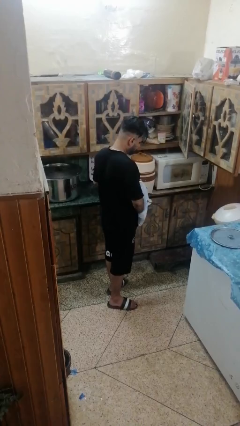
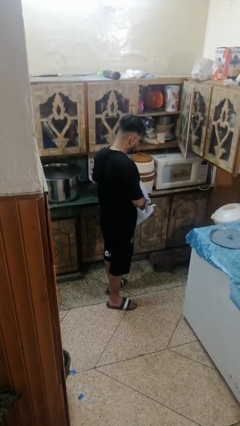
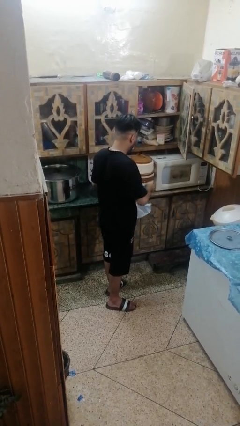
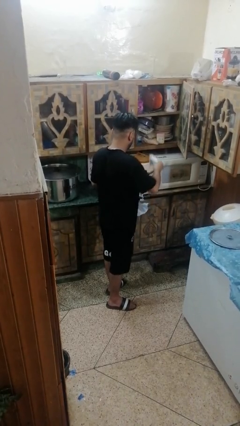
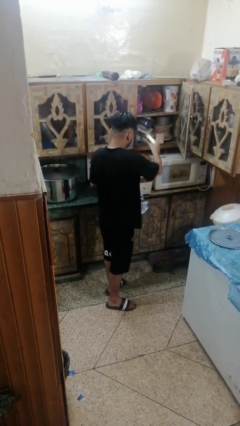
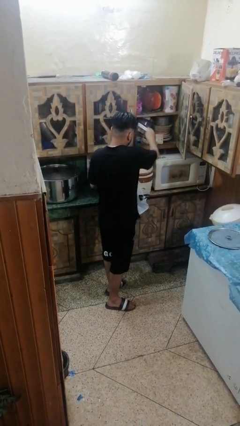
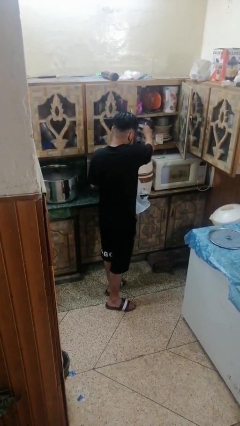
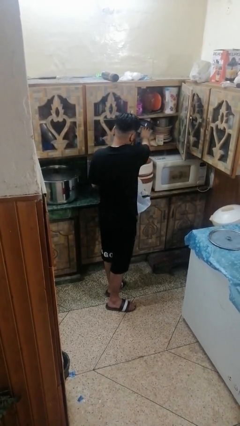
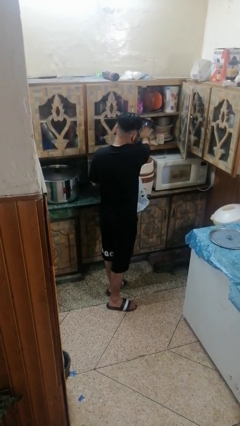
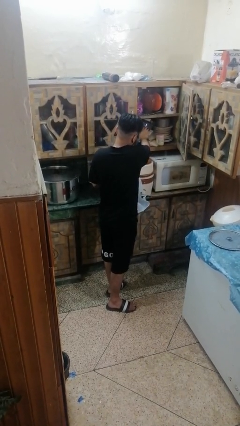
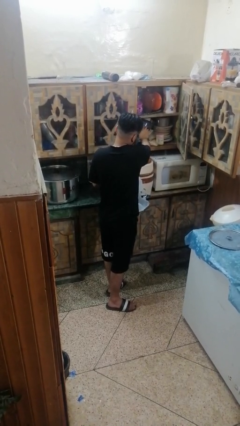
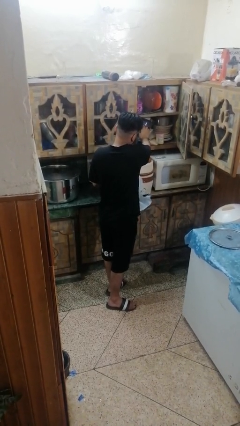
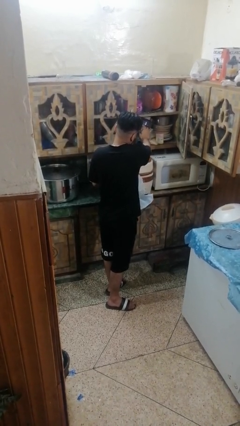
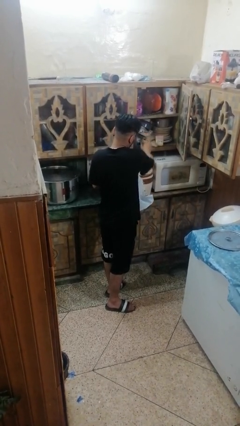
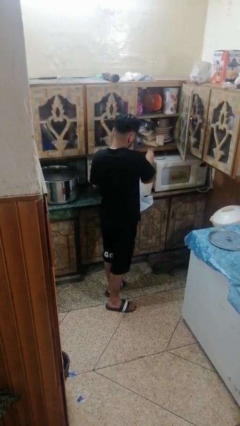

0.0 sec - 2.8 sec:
person loads groceries into cabinet

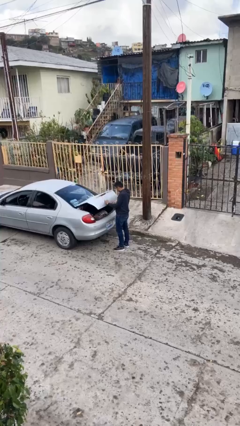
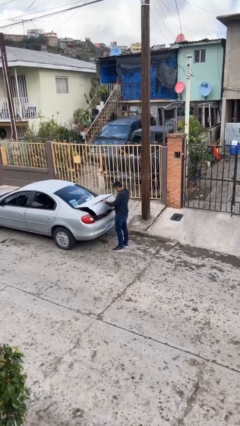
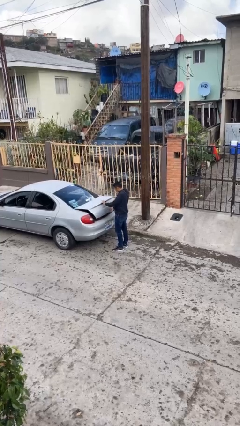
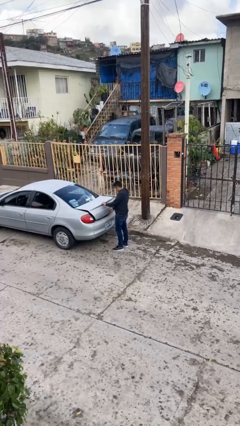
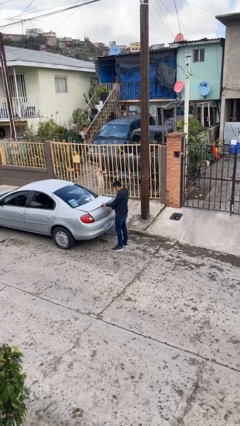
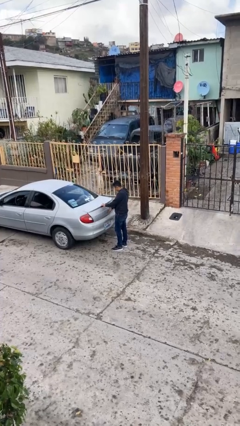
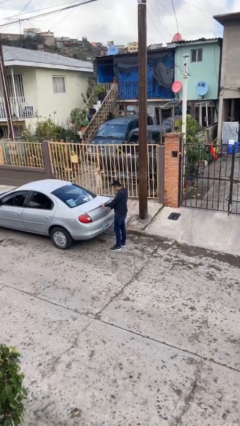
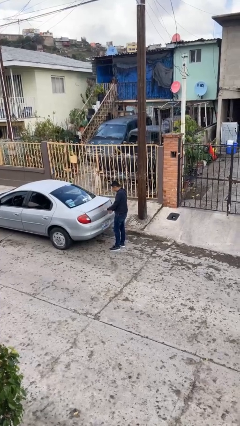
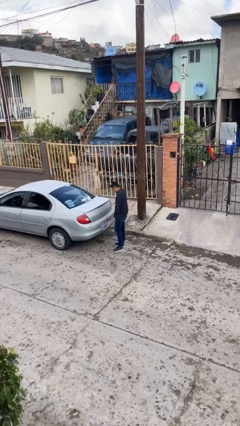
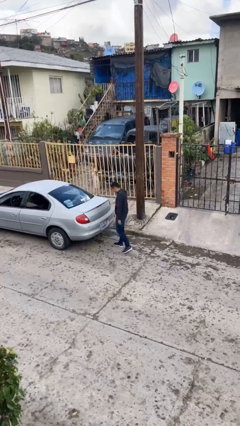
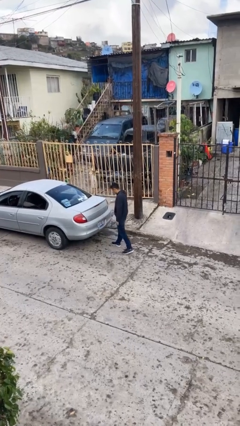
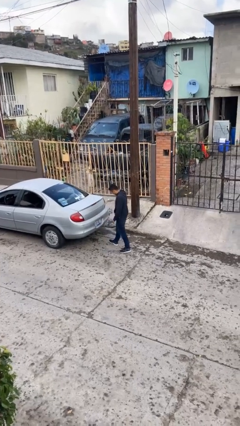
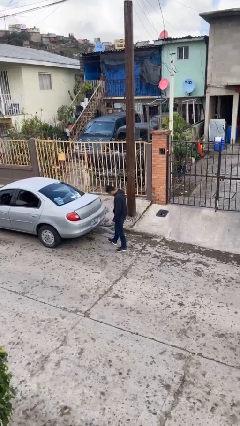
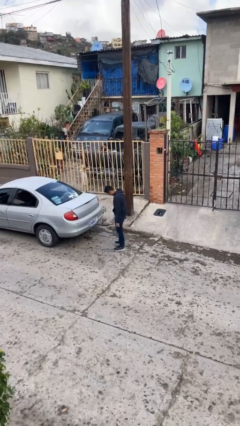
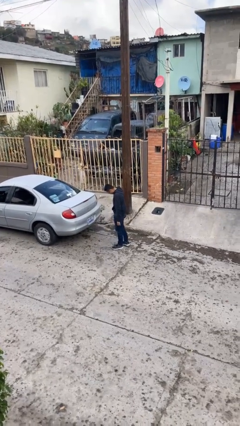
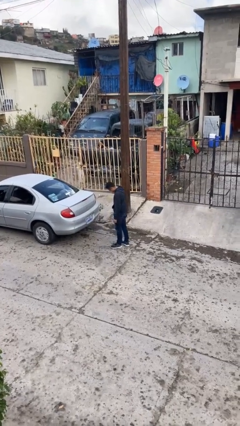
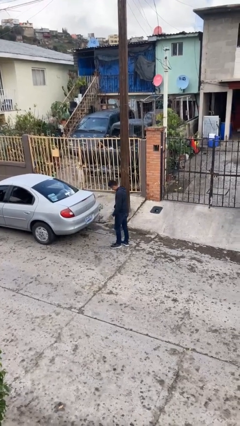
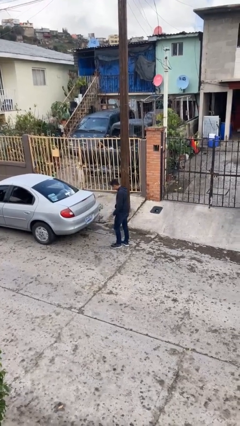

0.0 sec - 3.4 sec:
person closes car trunk

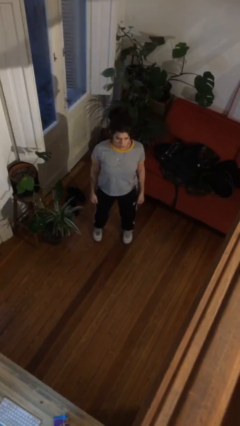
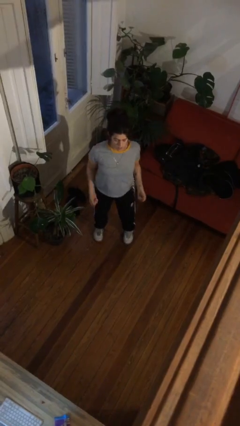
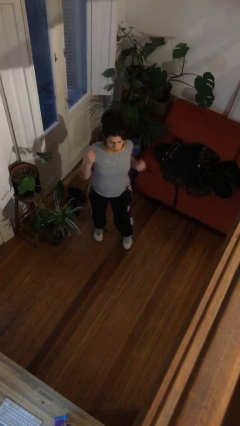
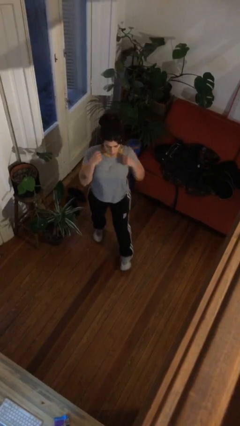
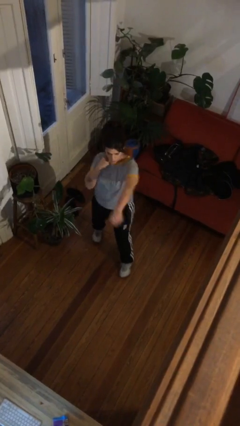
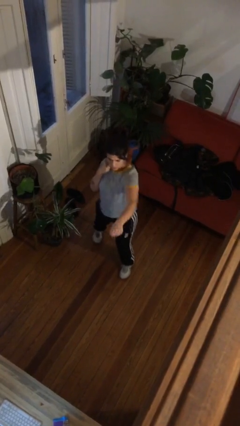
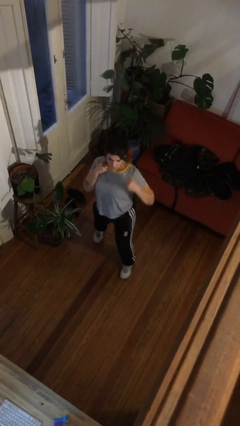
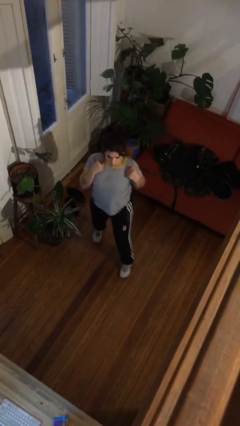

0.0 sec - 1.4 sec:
person punches

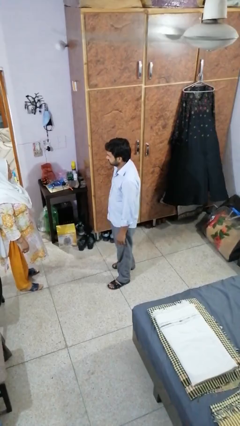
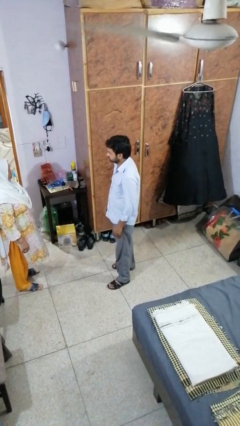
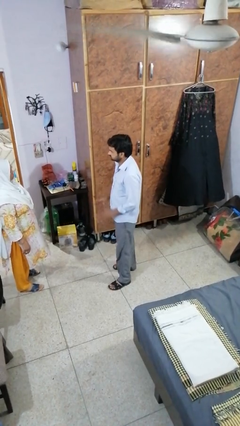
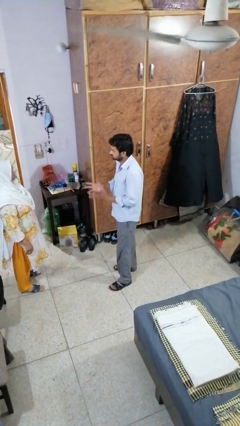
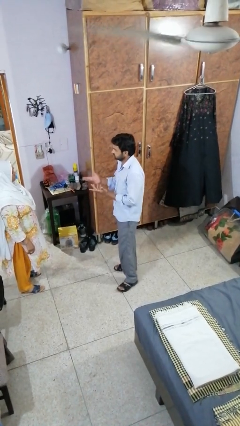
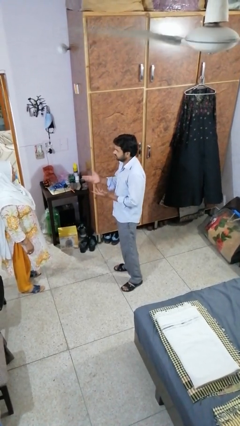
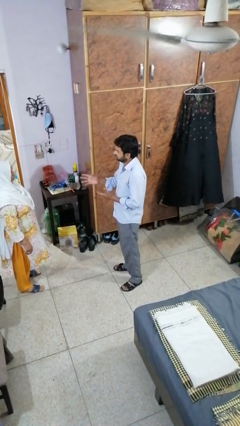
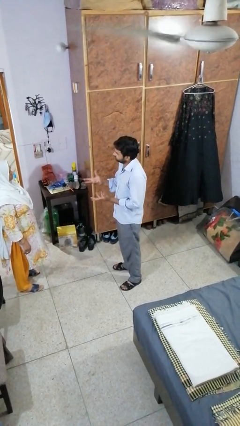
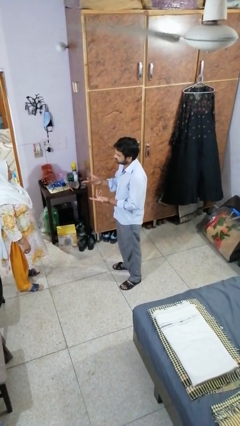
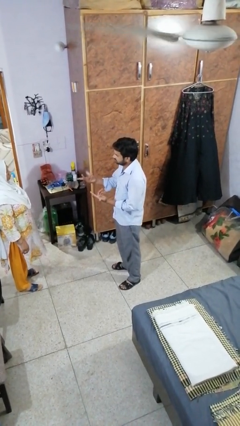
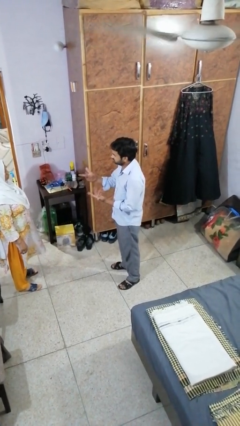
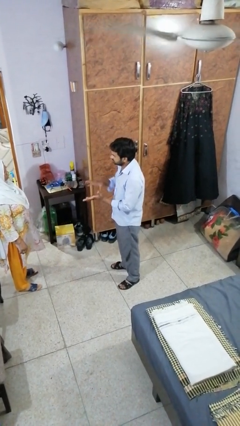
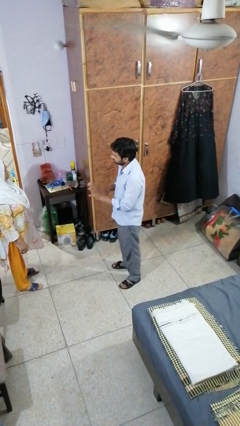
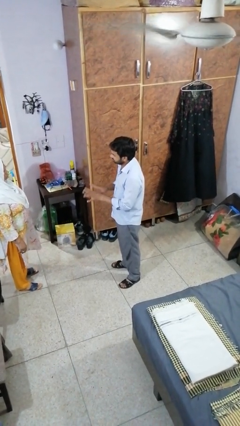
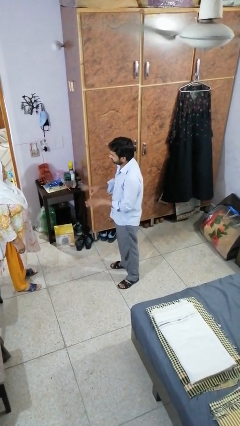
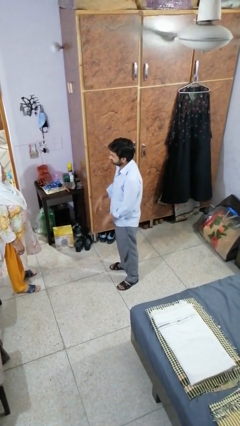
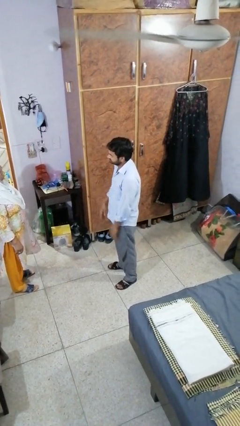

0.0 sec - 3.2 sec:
person talks to person

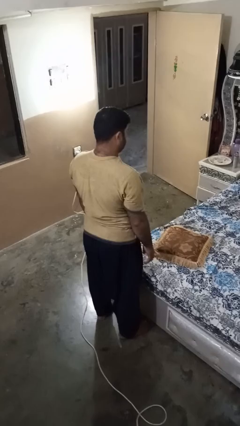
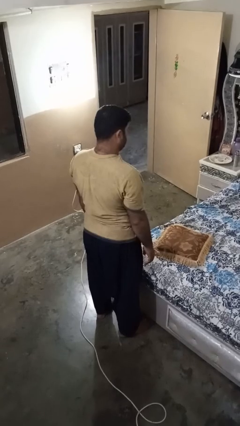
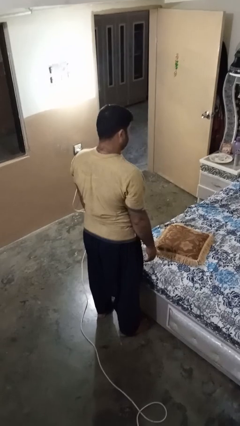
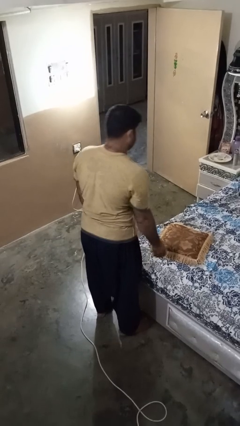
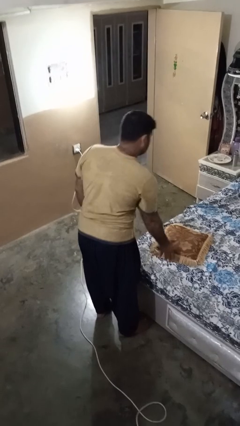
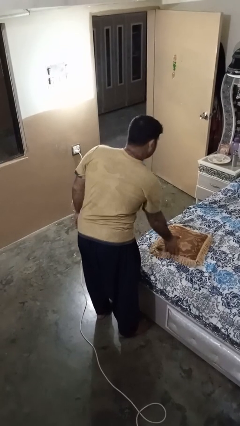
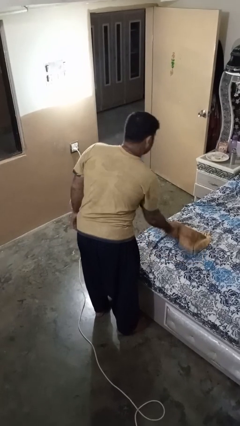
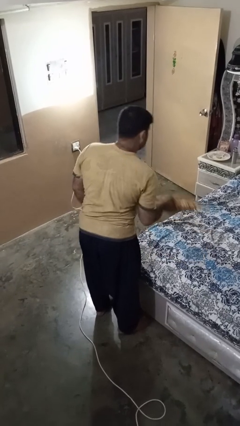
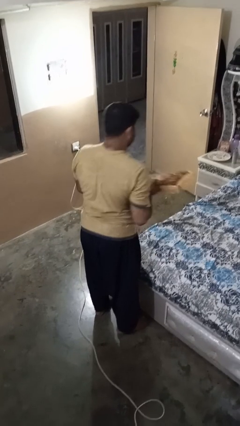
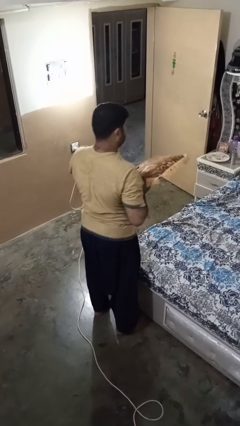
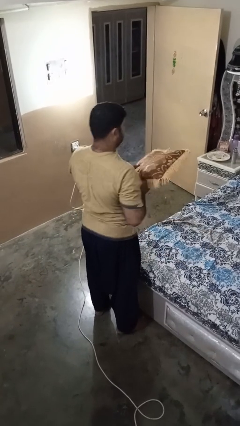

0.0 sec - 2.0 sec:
person picks up object from bed

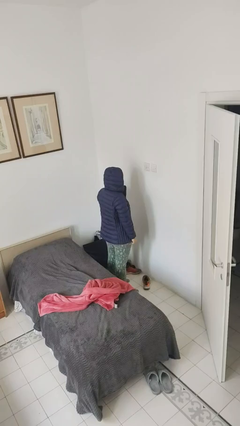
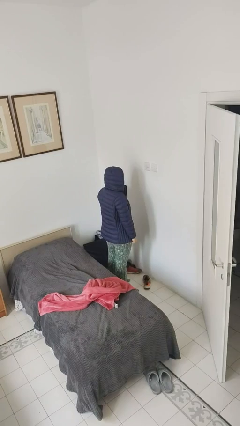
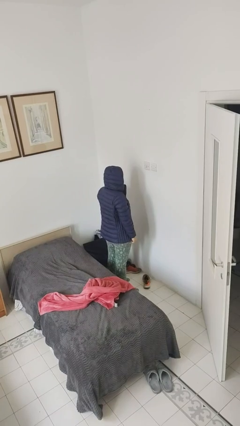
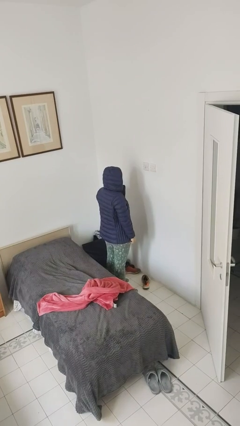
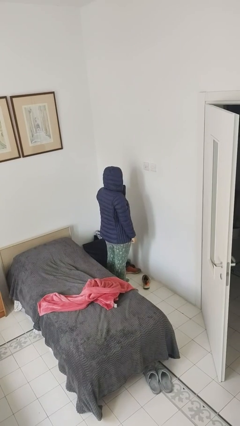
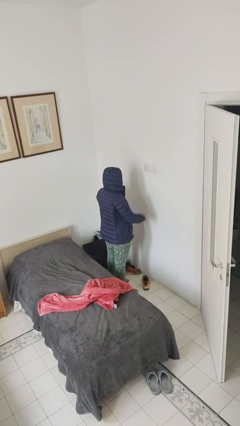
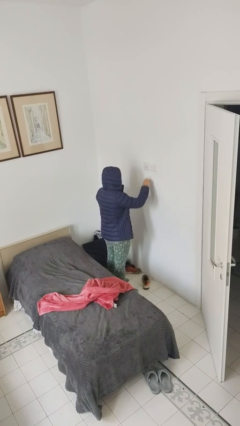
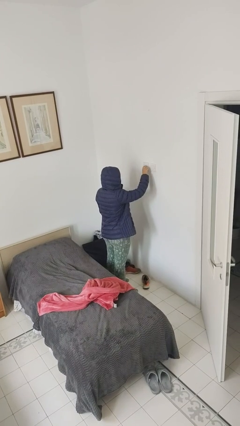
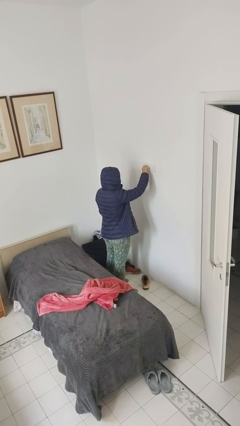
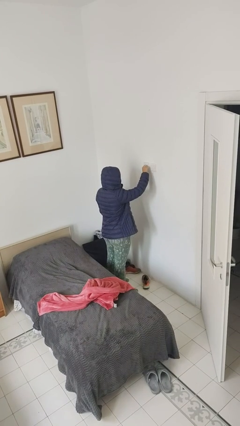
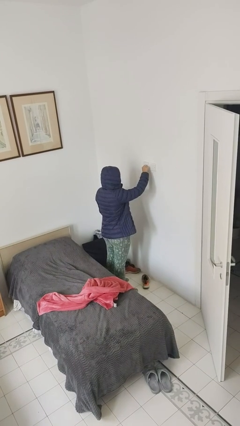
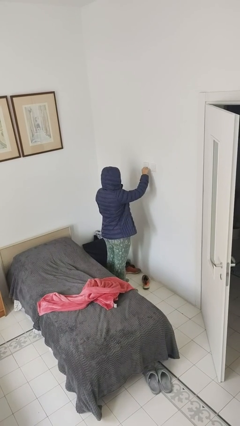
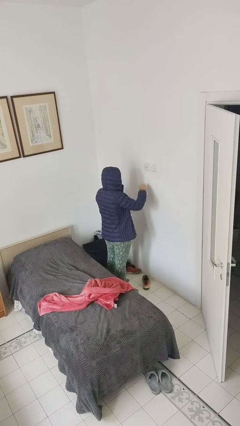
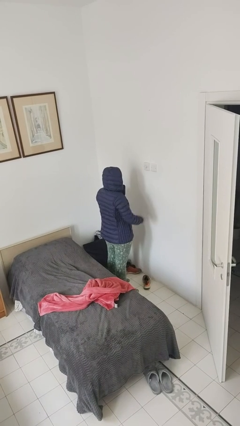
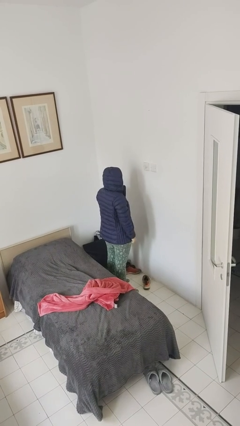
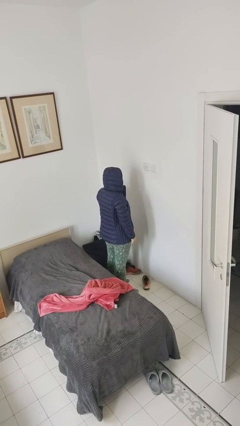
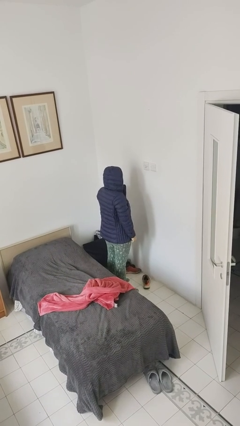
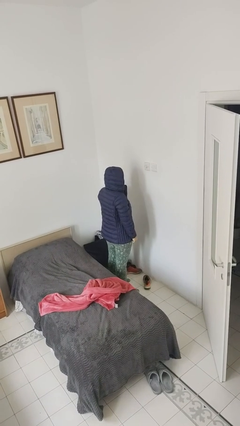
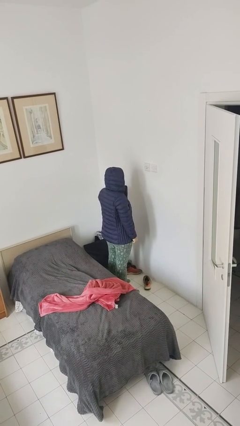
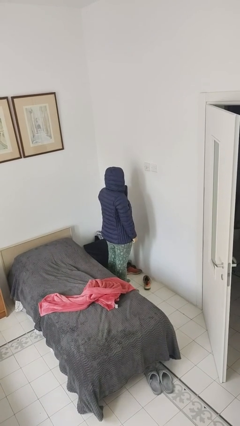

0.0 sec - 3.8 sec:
person turns on fan

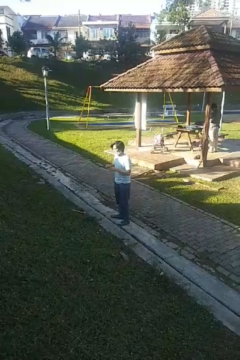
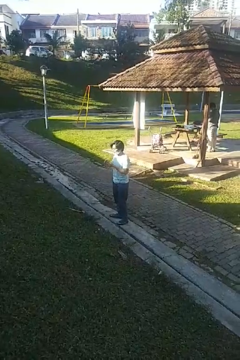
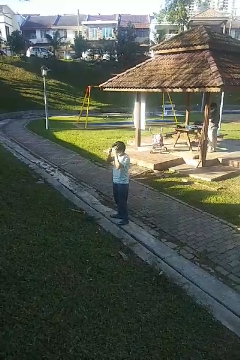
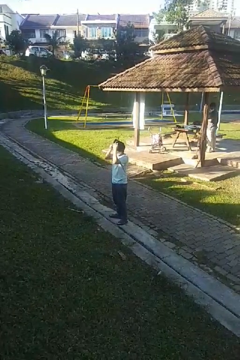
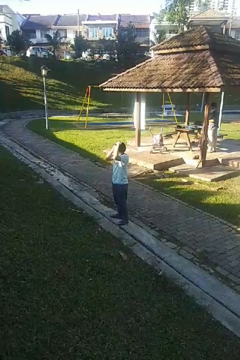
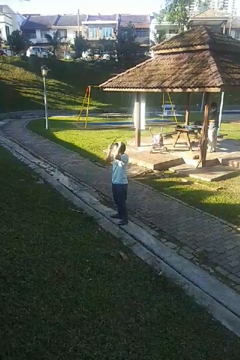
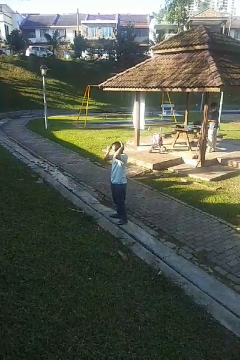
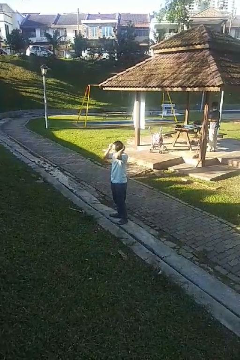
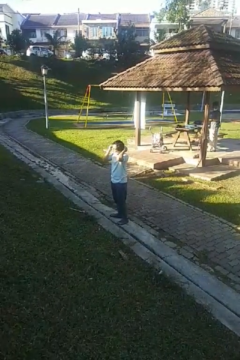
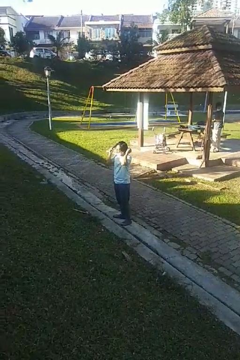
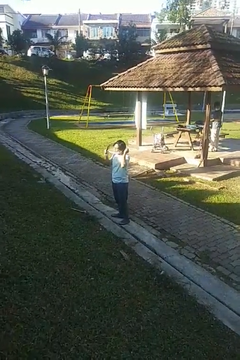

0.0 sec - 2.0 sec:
person brushes hair
